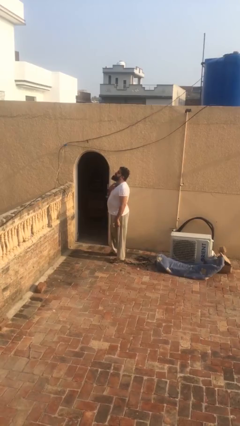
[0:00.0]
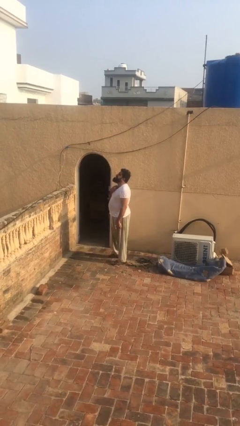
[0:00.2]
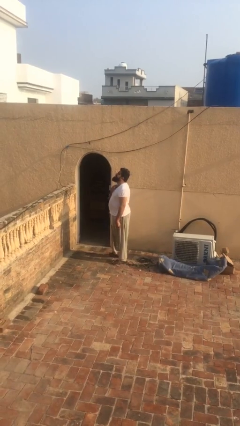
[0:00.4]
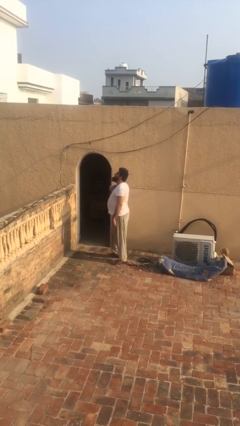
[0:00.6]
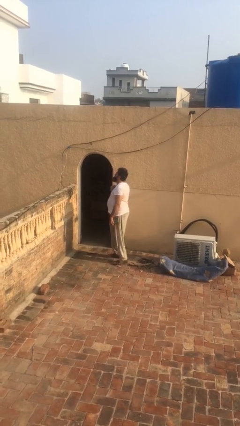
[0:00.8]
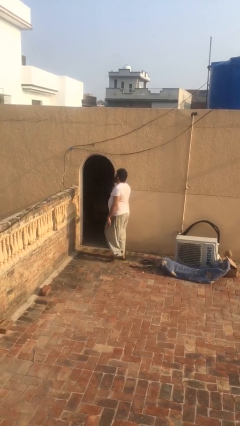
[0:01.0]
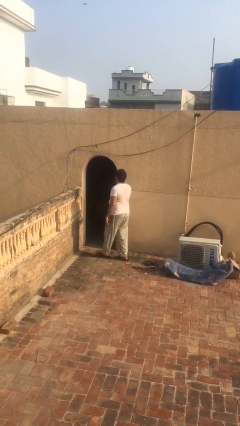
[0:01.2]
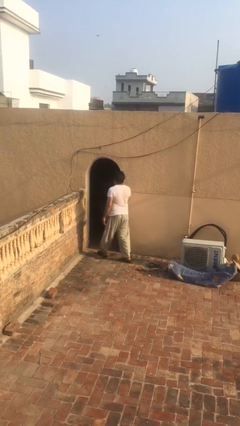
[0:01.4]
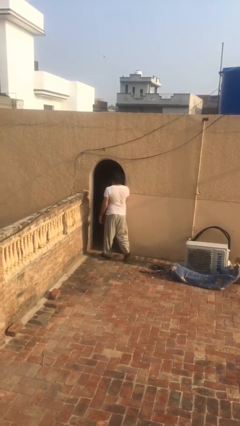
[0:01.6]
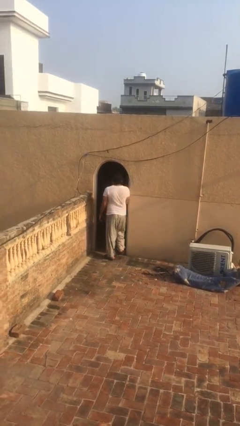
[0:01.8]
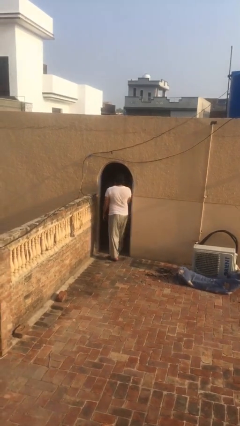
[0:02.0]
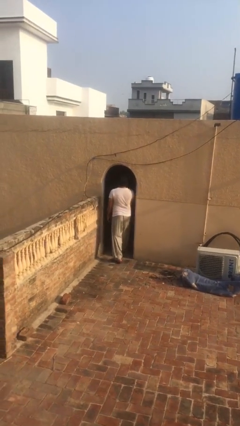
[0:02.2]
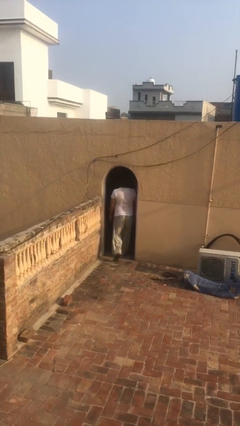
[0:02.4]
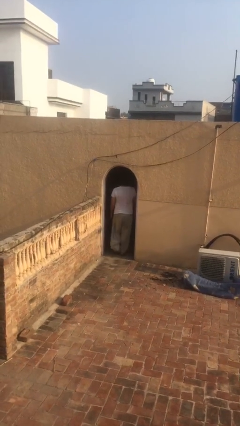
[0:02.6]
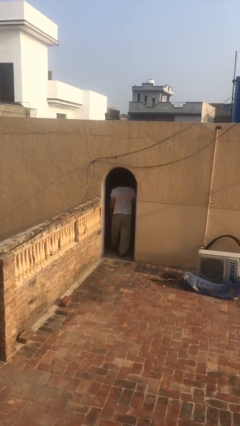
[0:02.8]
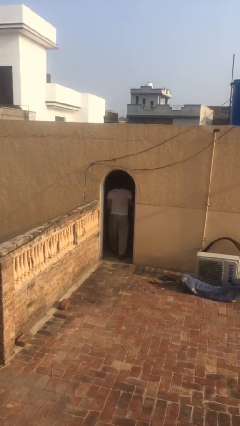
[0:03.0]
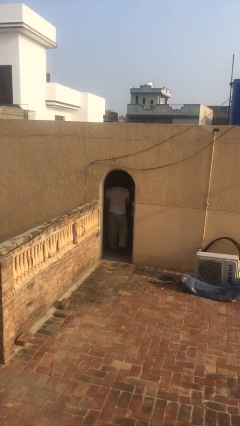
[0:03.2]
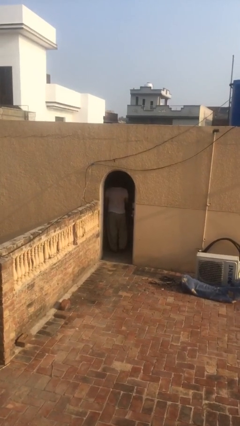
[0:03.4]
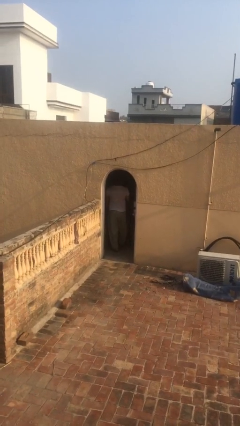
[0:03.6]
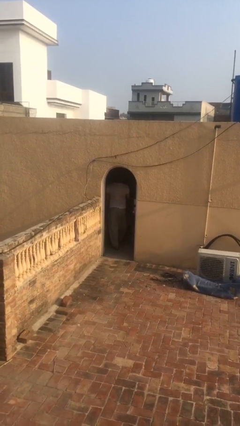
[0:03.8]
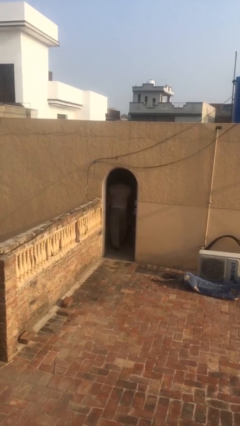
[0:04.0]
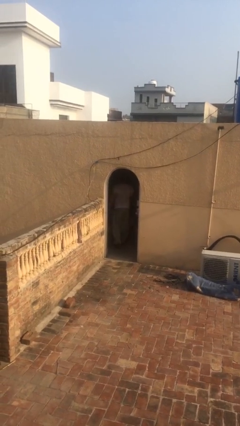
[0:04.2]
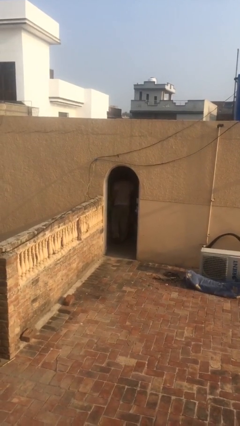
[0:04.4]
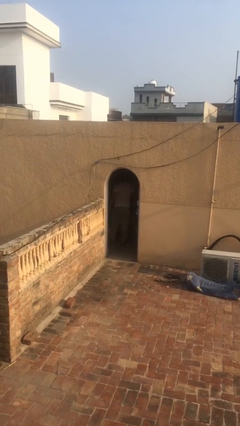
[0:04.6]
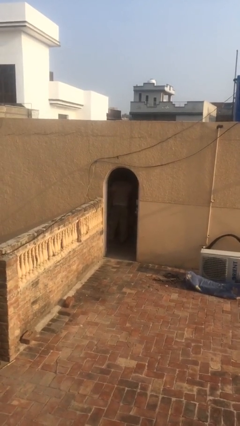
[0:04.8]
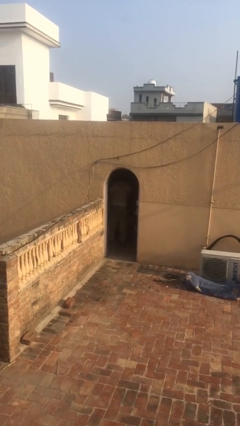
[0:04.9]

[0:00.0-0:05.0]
person exits scene through structure

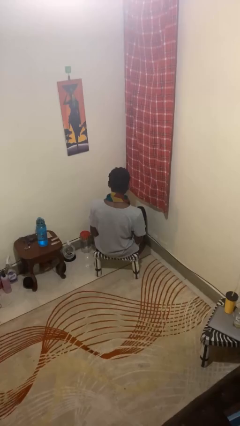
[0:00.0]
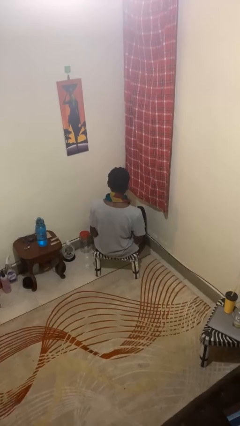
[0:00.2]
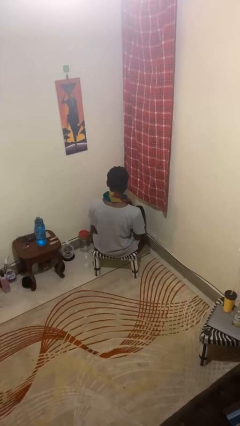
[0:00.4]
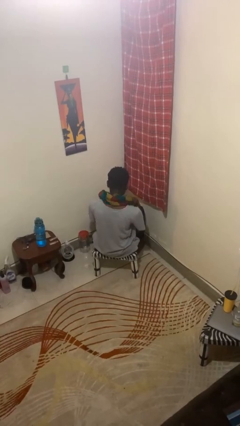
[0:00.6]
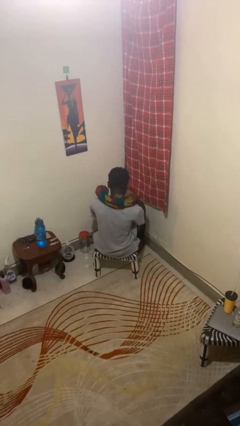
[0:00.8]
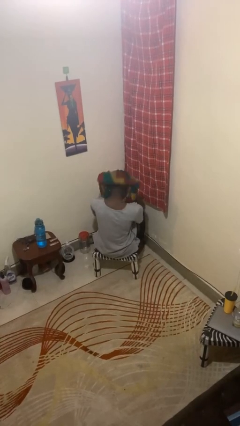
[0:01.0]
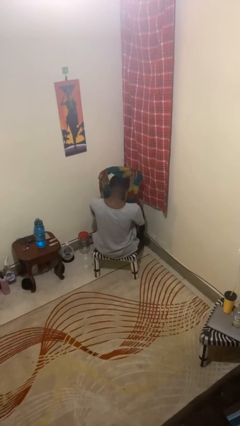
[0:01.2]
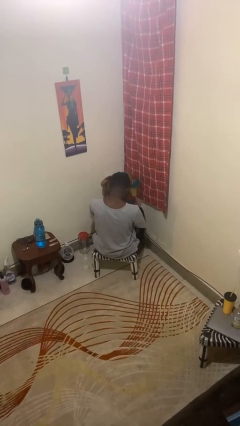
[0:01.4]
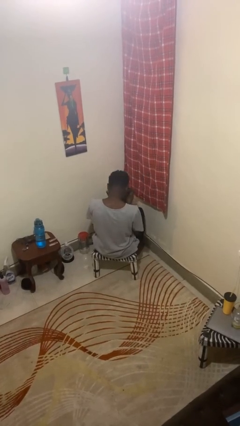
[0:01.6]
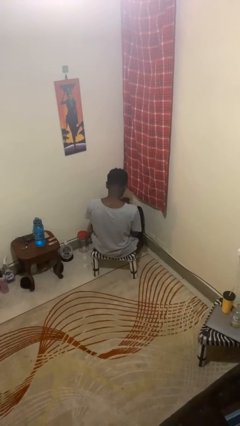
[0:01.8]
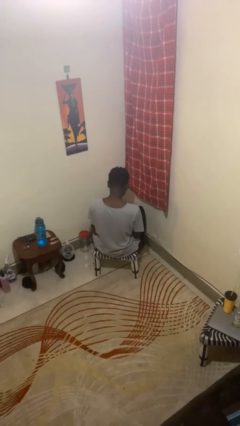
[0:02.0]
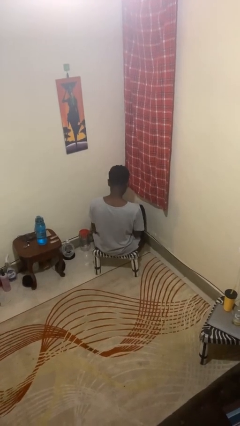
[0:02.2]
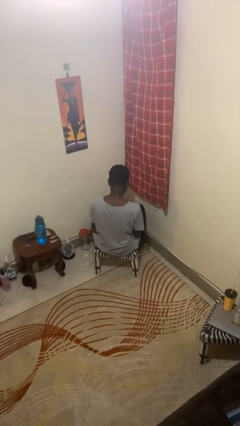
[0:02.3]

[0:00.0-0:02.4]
person takes off scarf

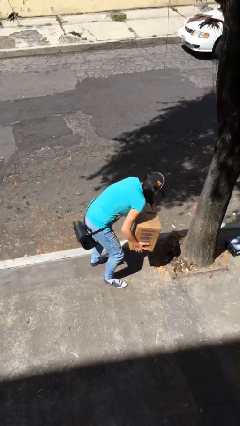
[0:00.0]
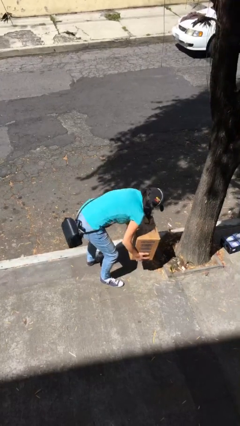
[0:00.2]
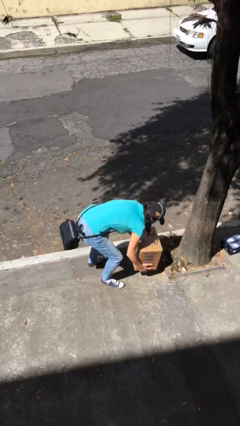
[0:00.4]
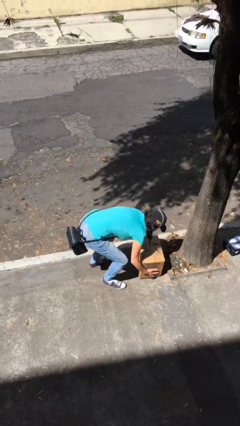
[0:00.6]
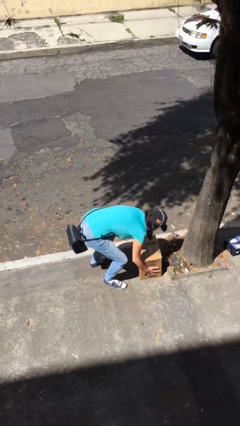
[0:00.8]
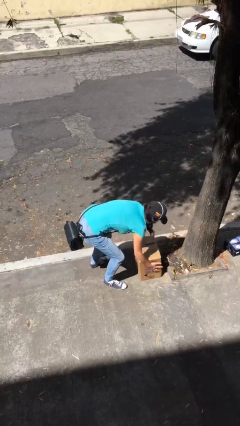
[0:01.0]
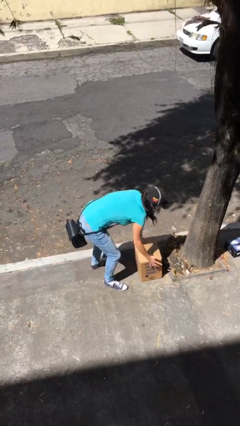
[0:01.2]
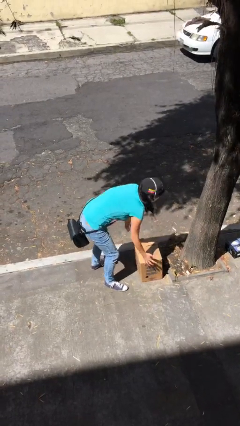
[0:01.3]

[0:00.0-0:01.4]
person puts down object on floor

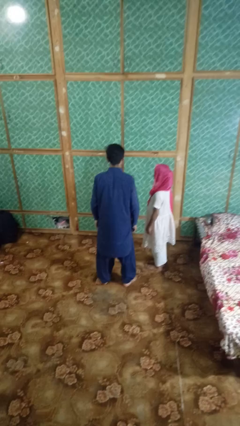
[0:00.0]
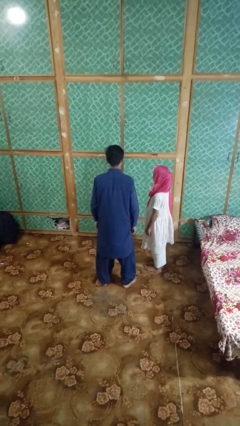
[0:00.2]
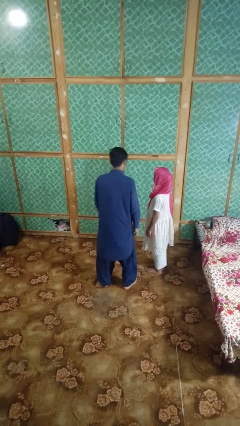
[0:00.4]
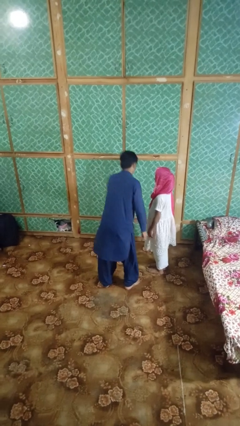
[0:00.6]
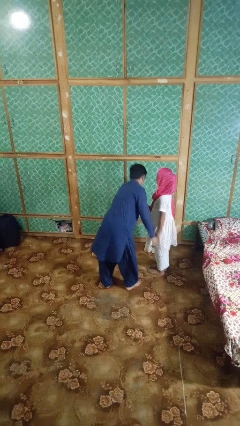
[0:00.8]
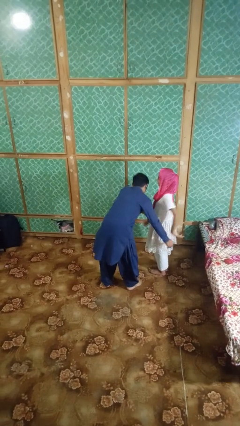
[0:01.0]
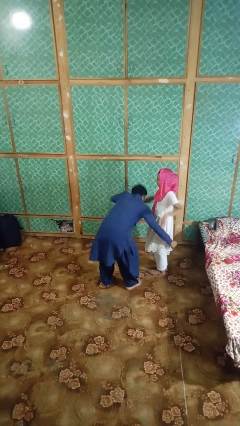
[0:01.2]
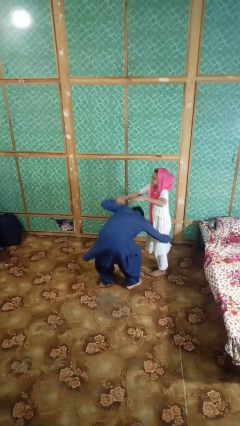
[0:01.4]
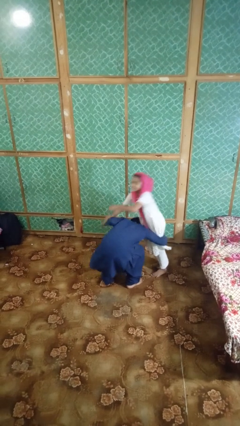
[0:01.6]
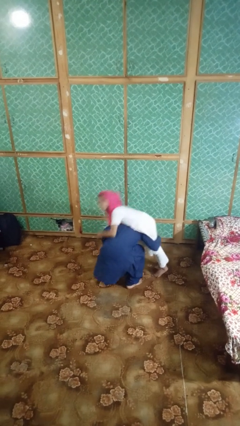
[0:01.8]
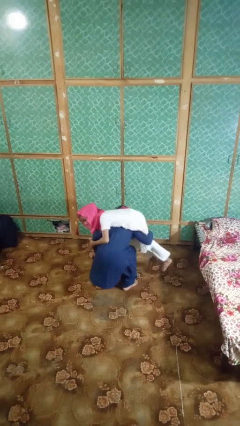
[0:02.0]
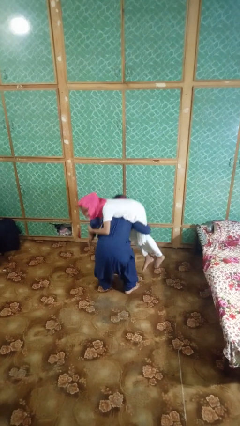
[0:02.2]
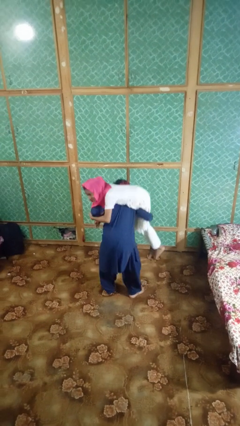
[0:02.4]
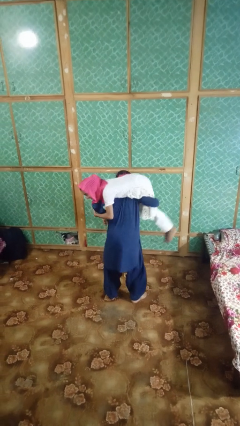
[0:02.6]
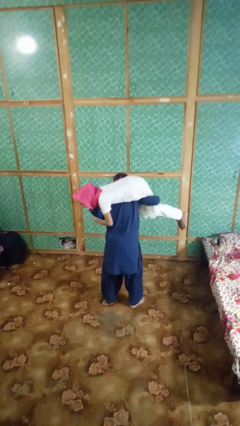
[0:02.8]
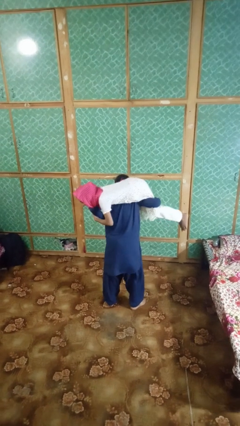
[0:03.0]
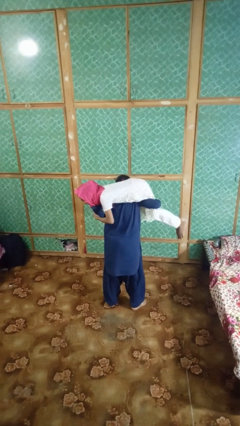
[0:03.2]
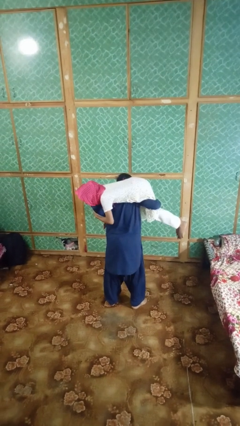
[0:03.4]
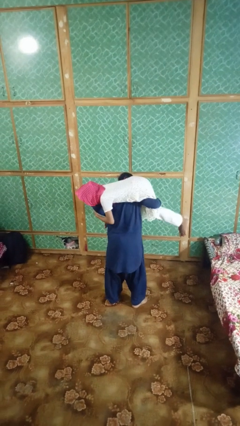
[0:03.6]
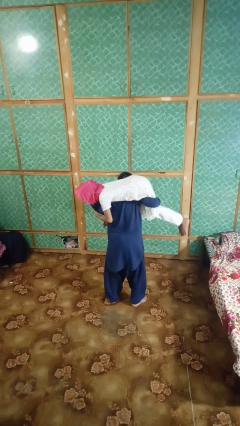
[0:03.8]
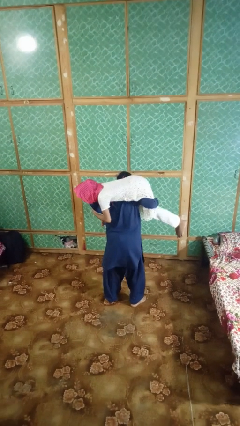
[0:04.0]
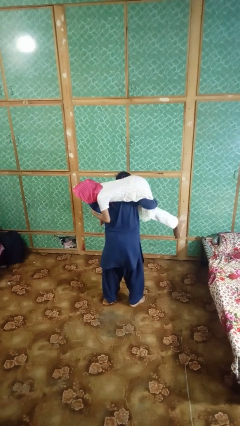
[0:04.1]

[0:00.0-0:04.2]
person carries person on shoulders

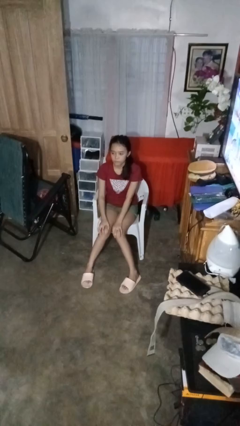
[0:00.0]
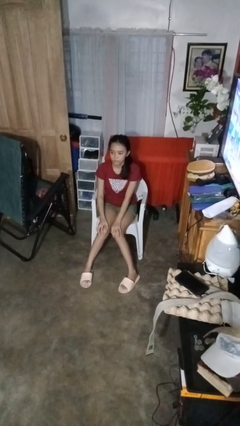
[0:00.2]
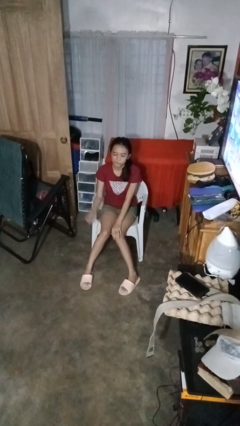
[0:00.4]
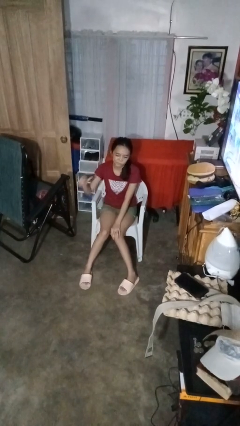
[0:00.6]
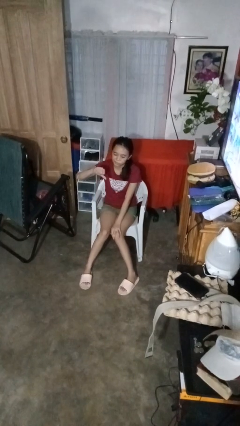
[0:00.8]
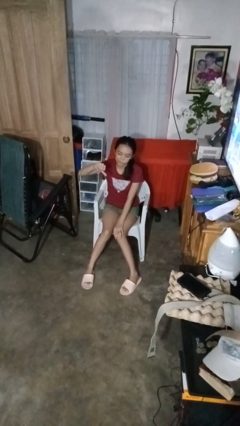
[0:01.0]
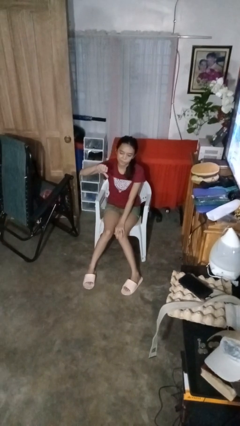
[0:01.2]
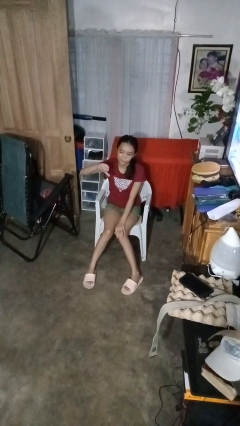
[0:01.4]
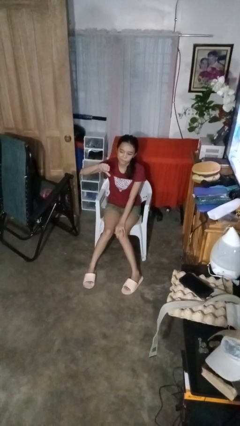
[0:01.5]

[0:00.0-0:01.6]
person gestures thumbs down

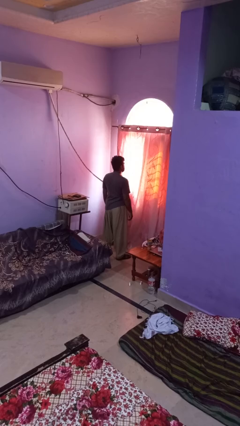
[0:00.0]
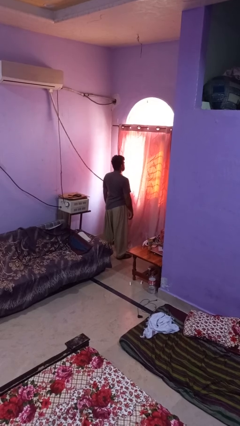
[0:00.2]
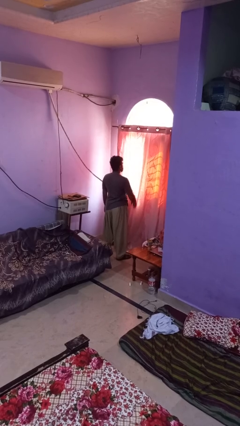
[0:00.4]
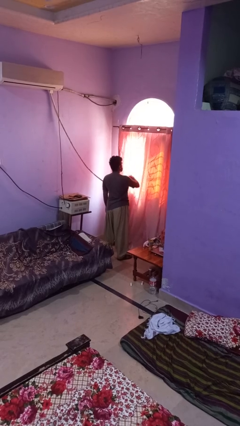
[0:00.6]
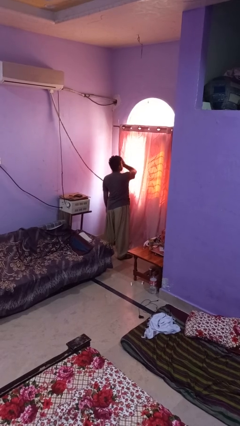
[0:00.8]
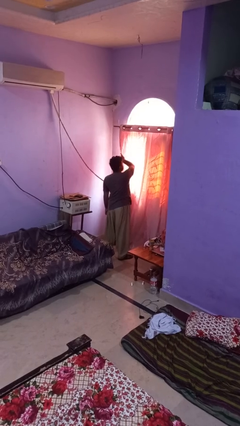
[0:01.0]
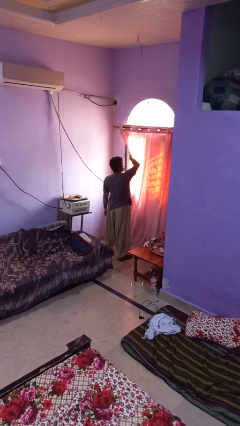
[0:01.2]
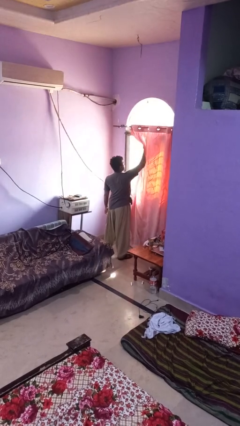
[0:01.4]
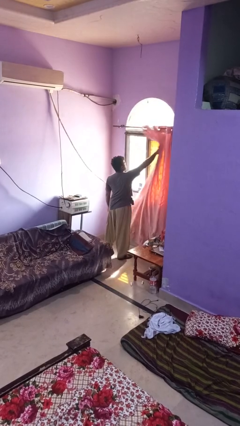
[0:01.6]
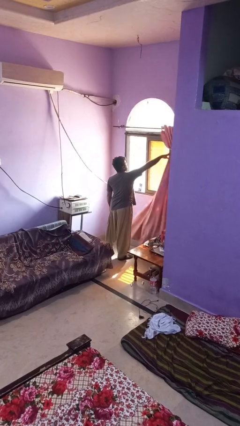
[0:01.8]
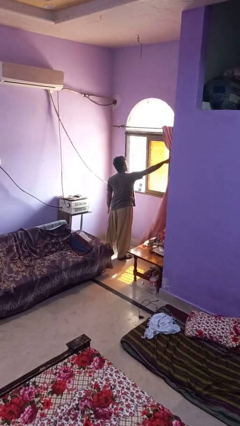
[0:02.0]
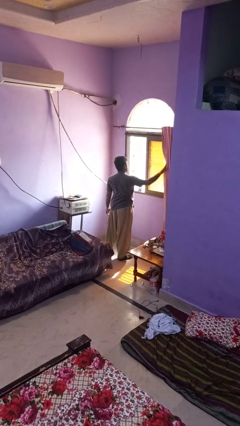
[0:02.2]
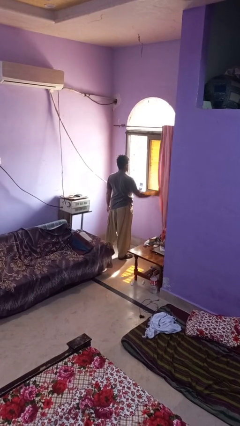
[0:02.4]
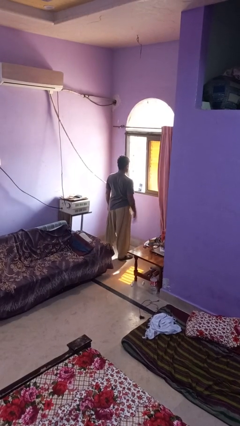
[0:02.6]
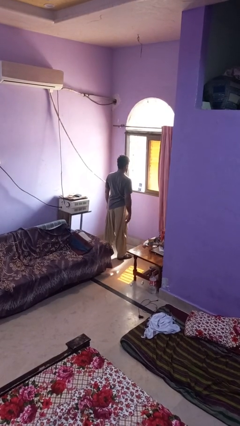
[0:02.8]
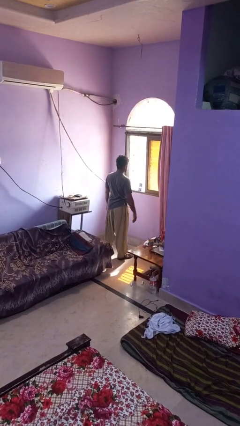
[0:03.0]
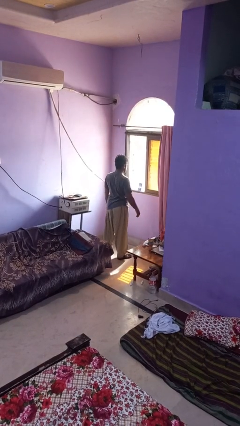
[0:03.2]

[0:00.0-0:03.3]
person opens curtains
